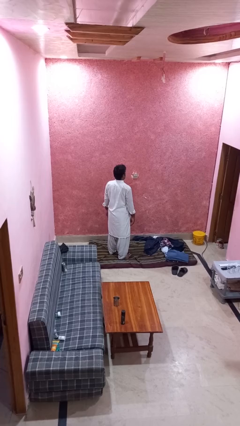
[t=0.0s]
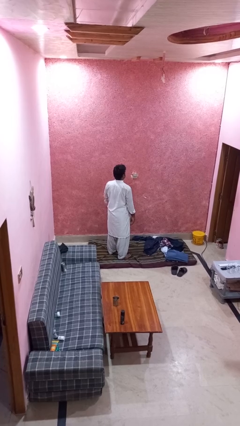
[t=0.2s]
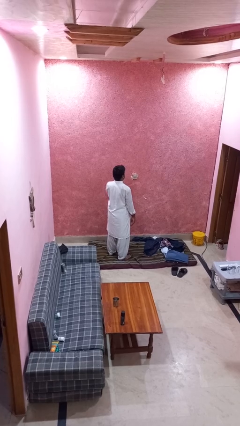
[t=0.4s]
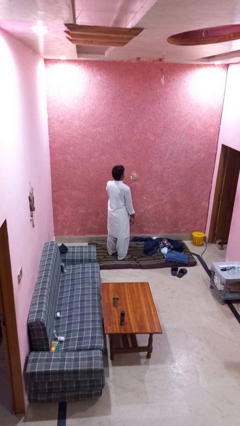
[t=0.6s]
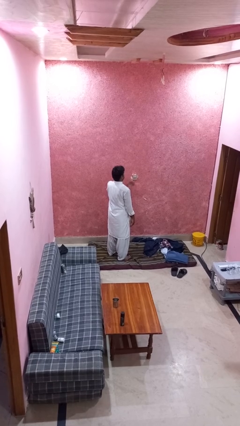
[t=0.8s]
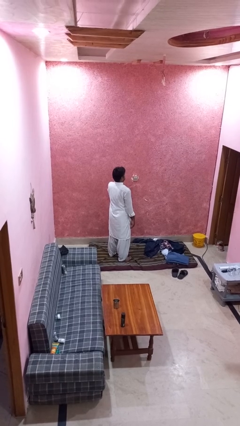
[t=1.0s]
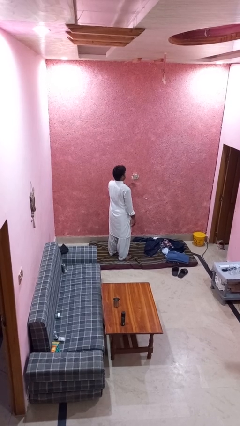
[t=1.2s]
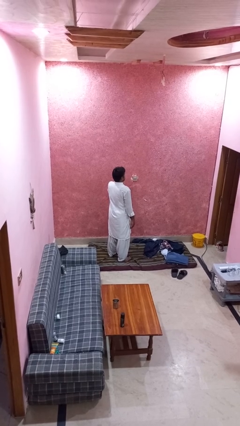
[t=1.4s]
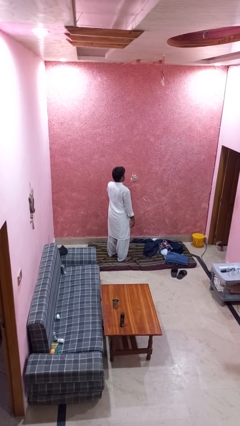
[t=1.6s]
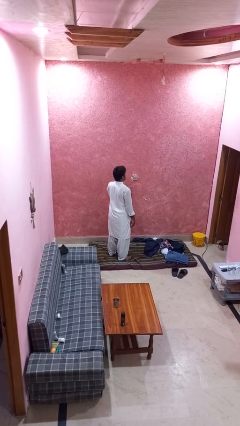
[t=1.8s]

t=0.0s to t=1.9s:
person drums on chest

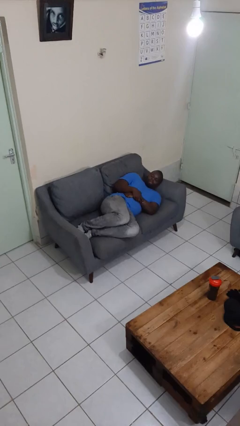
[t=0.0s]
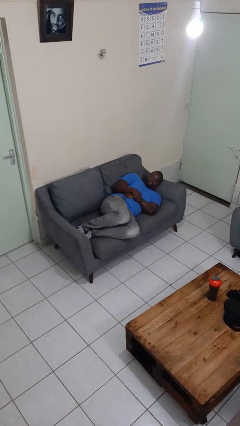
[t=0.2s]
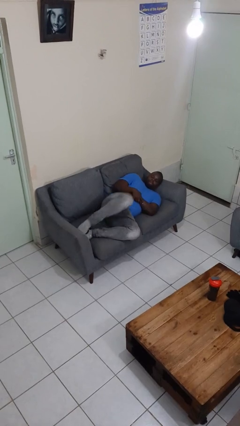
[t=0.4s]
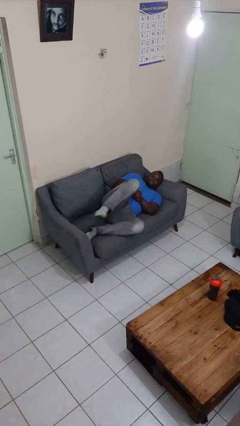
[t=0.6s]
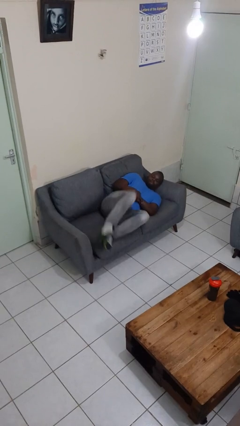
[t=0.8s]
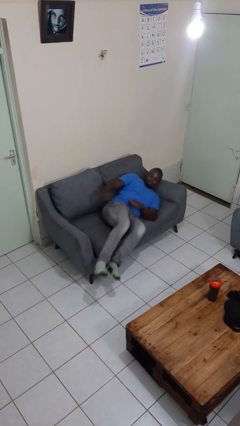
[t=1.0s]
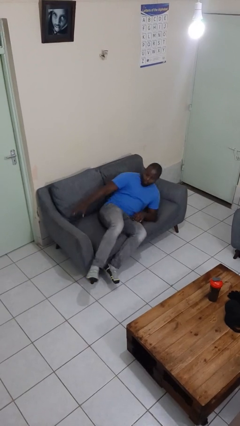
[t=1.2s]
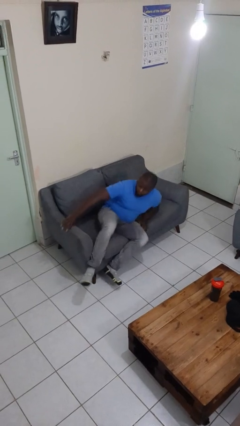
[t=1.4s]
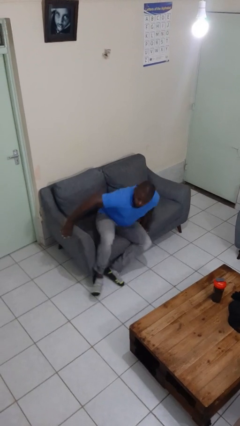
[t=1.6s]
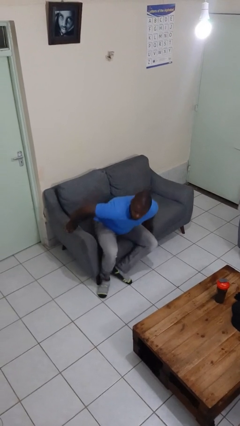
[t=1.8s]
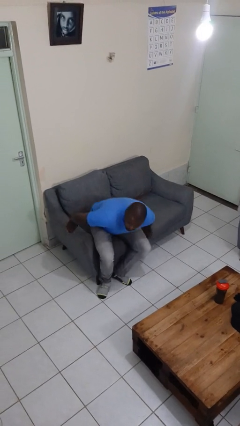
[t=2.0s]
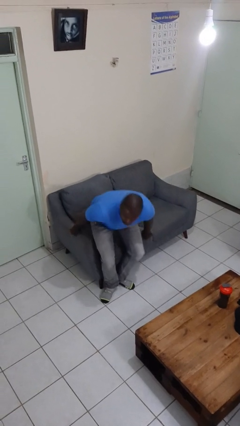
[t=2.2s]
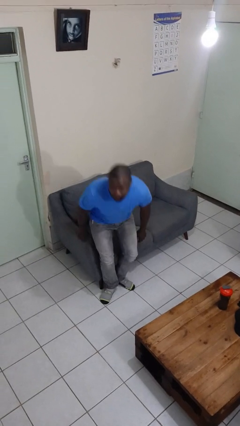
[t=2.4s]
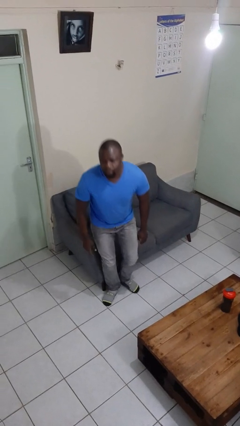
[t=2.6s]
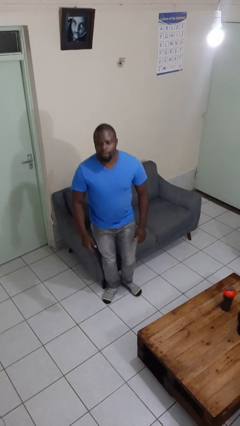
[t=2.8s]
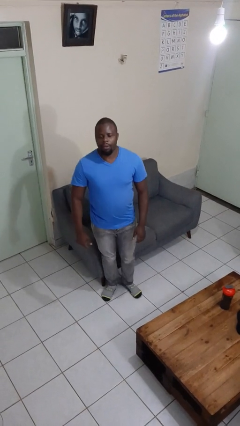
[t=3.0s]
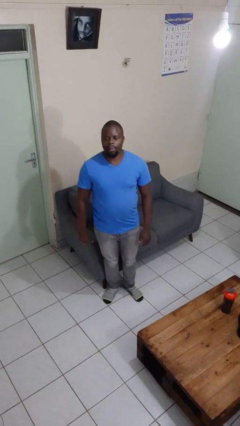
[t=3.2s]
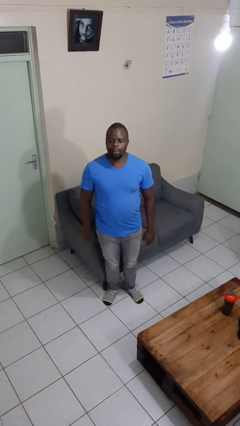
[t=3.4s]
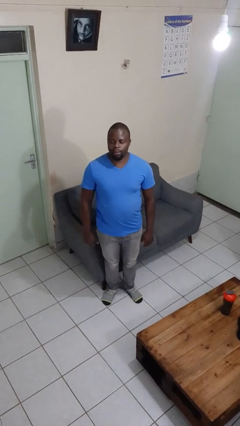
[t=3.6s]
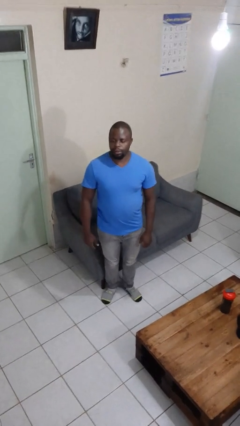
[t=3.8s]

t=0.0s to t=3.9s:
person stands up

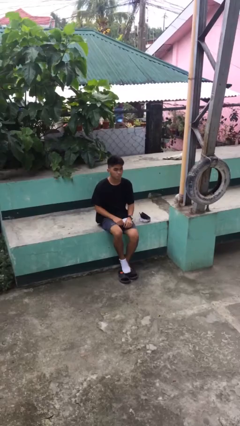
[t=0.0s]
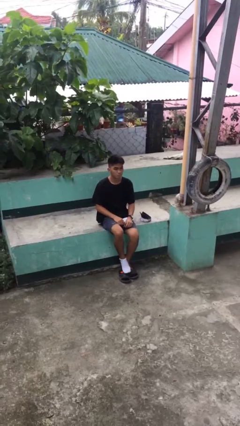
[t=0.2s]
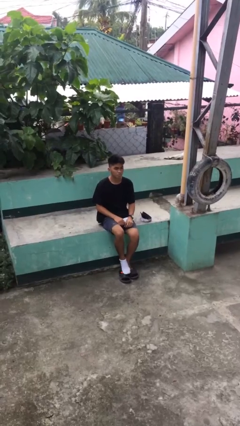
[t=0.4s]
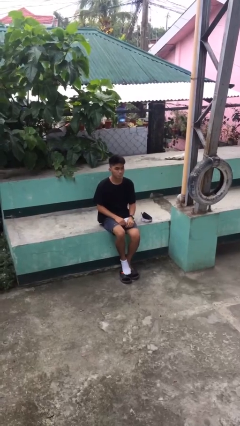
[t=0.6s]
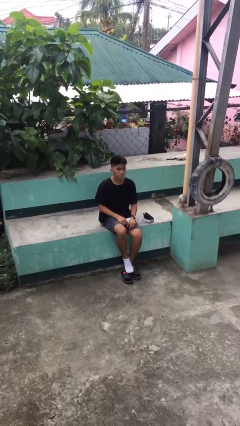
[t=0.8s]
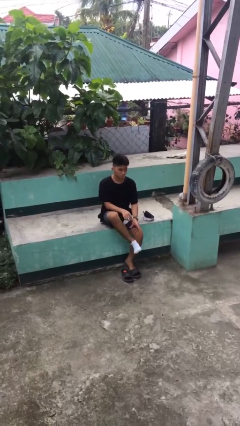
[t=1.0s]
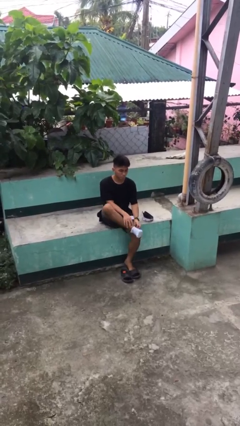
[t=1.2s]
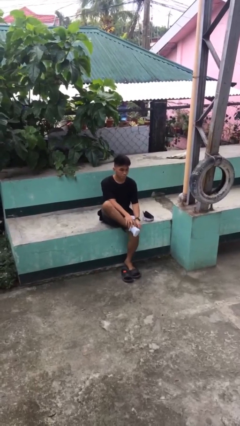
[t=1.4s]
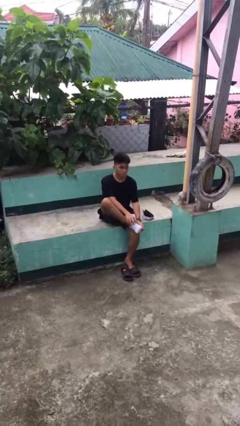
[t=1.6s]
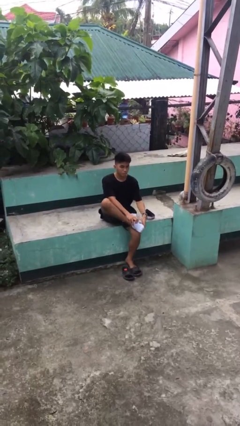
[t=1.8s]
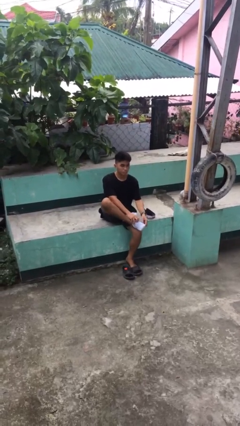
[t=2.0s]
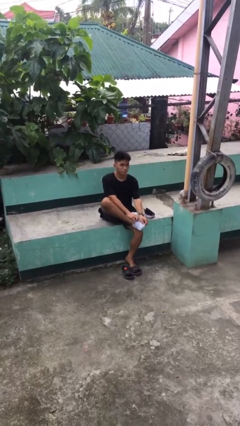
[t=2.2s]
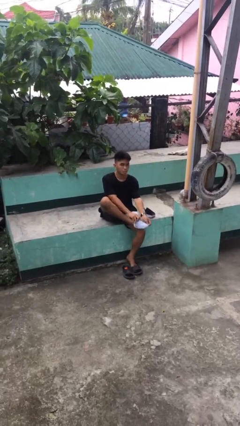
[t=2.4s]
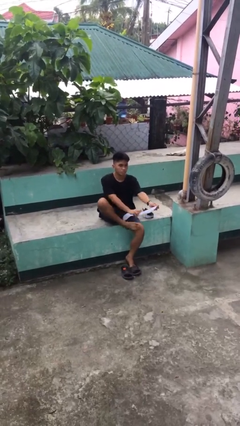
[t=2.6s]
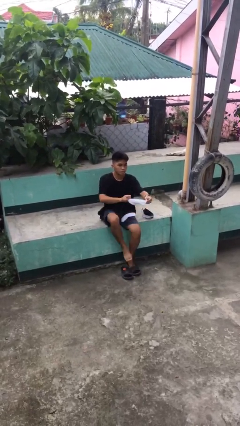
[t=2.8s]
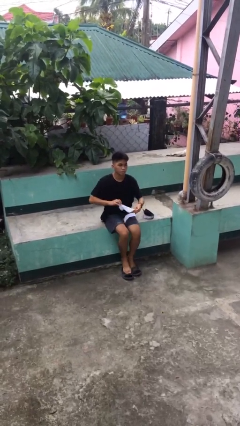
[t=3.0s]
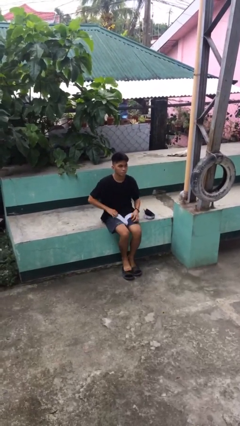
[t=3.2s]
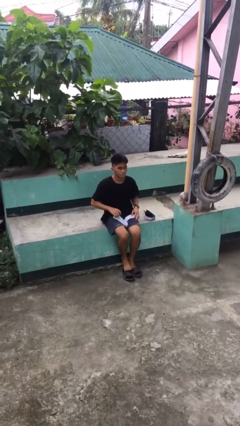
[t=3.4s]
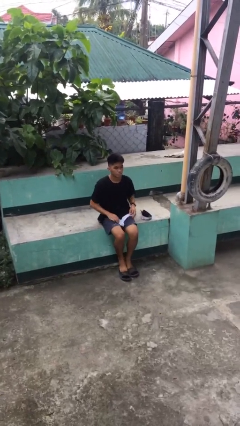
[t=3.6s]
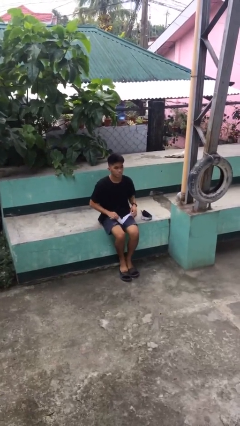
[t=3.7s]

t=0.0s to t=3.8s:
person takes off socks

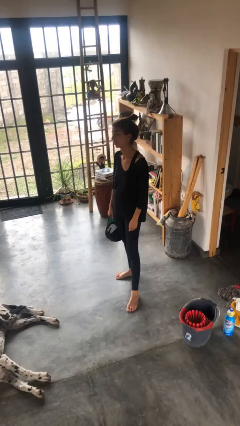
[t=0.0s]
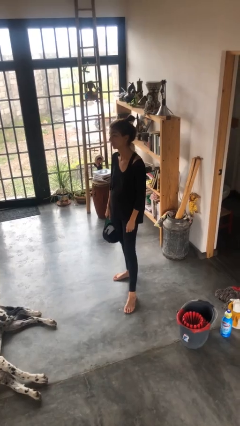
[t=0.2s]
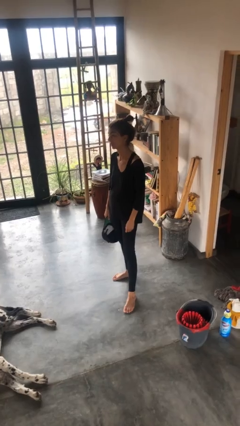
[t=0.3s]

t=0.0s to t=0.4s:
person takes off hat

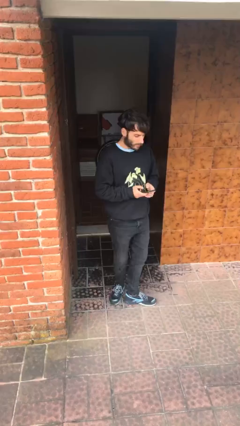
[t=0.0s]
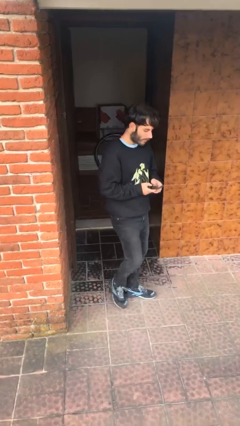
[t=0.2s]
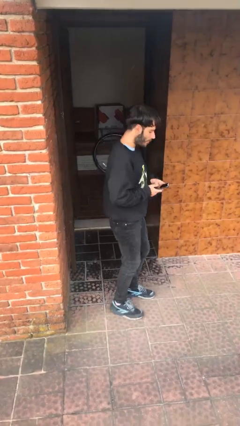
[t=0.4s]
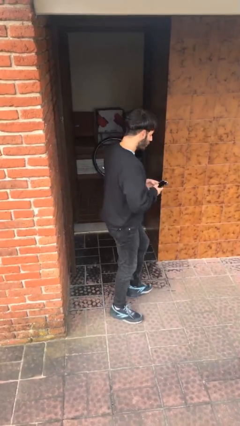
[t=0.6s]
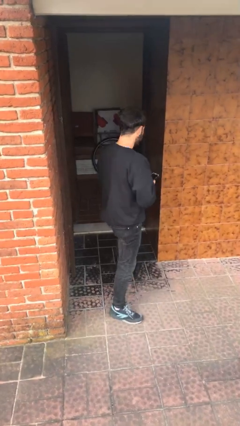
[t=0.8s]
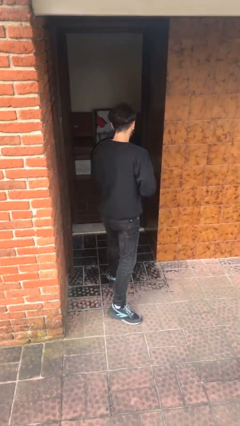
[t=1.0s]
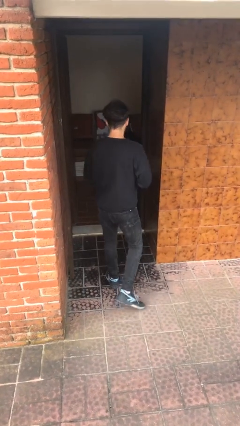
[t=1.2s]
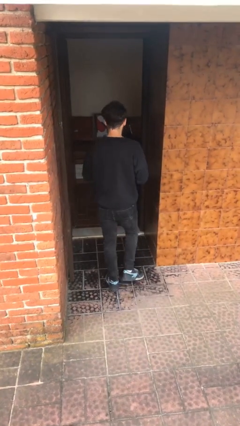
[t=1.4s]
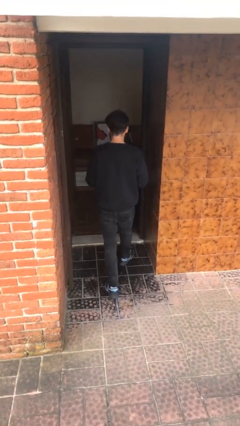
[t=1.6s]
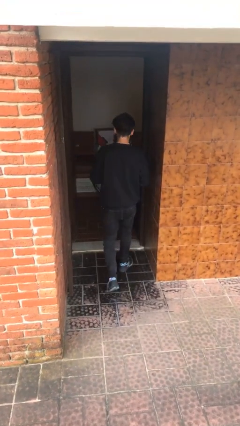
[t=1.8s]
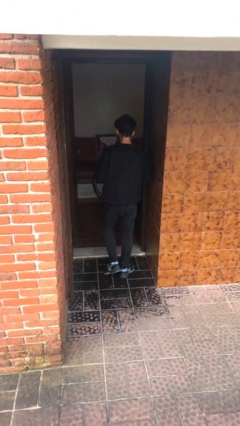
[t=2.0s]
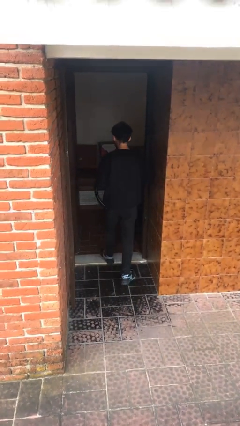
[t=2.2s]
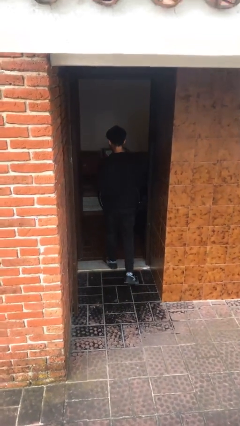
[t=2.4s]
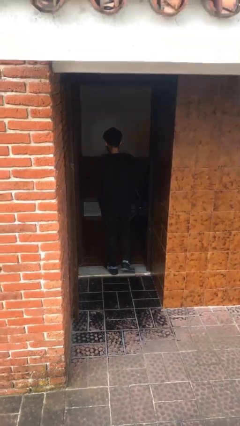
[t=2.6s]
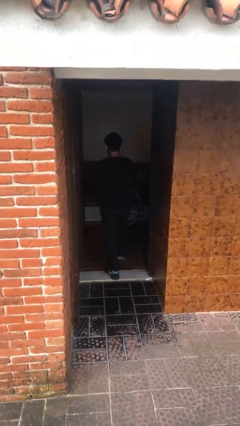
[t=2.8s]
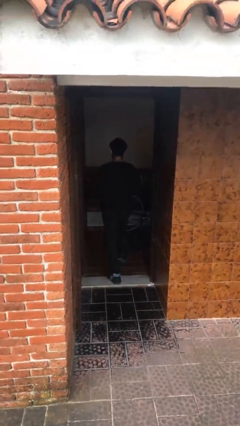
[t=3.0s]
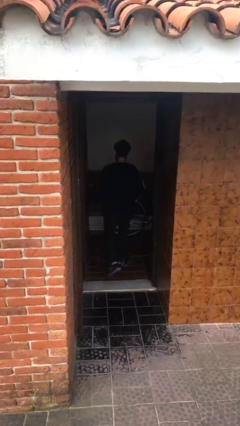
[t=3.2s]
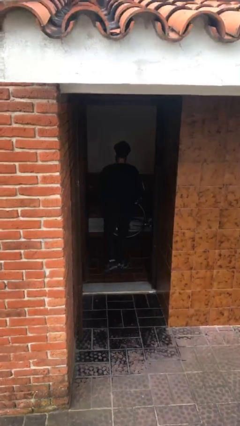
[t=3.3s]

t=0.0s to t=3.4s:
person exits scene through structure

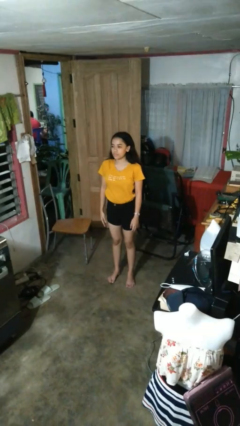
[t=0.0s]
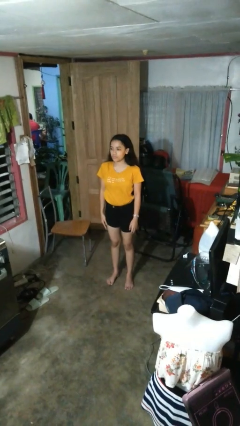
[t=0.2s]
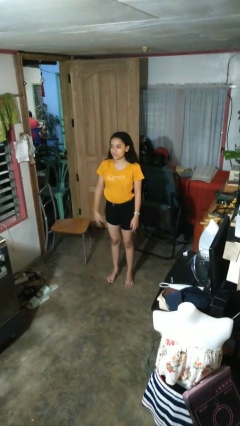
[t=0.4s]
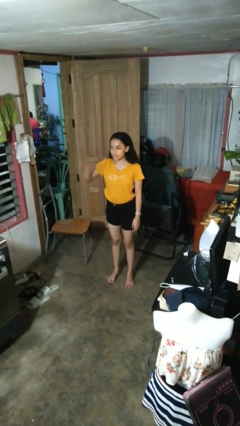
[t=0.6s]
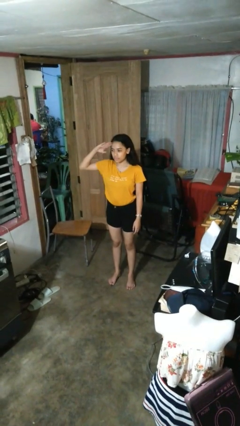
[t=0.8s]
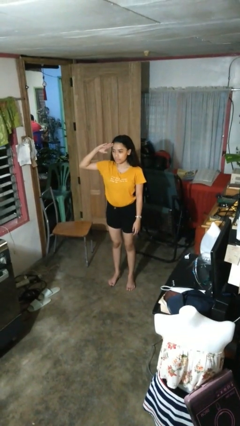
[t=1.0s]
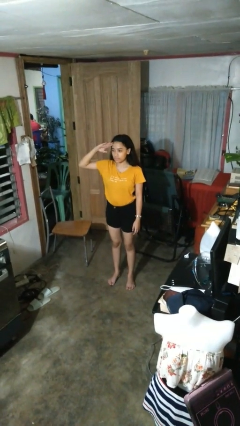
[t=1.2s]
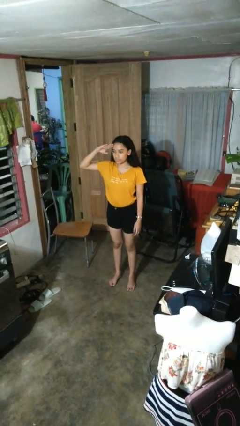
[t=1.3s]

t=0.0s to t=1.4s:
person salutes

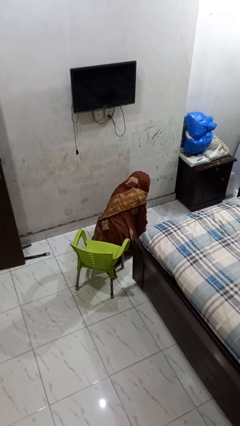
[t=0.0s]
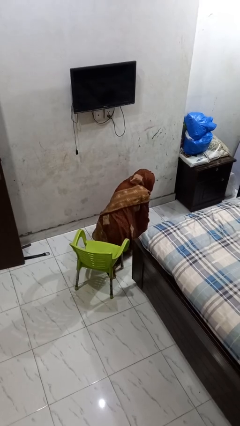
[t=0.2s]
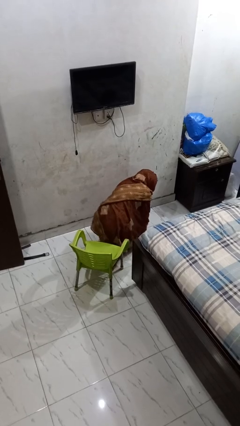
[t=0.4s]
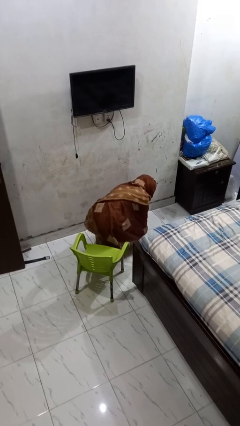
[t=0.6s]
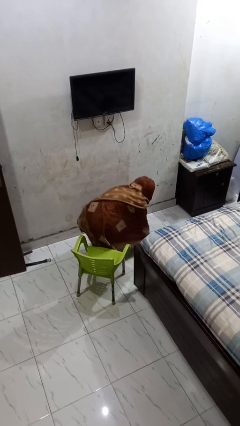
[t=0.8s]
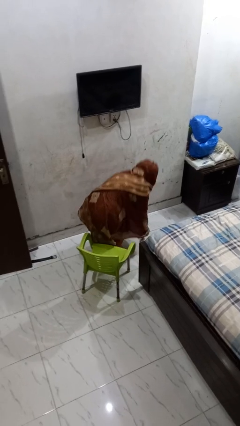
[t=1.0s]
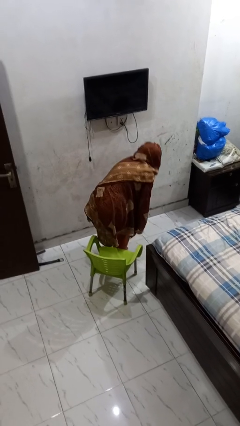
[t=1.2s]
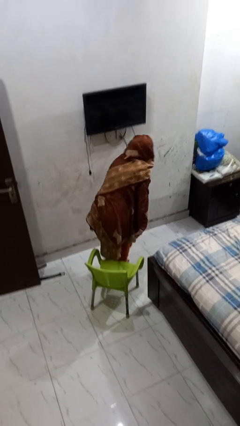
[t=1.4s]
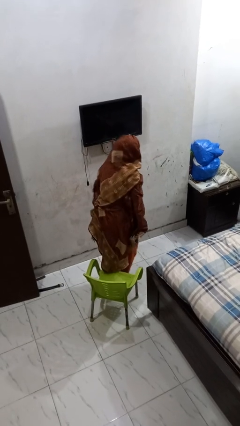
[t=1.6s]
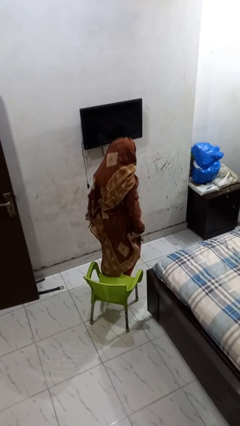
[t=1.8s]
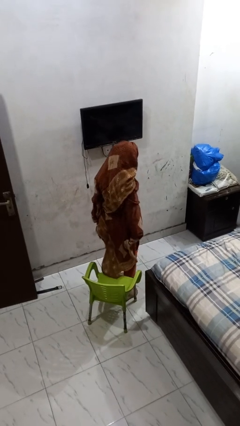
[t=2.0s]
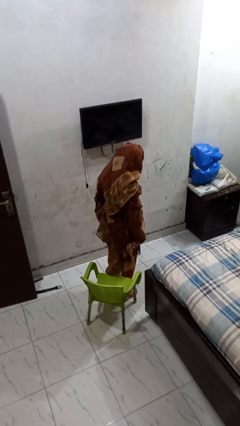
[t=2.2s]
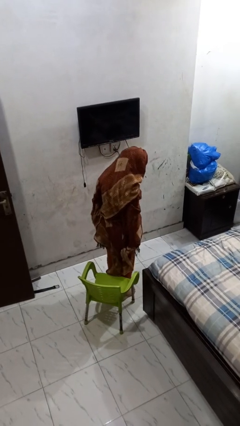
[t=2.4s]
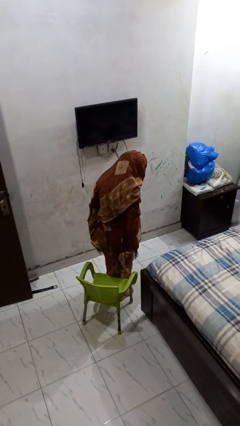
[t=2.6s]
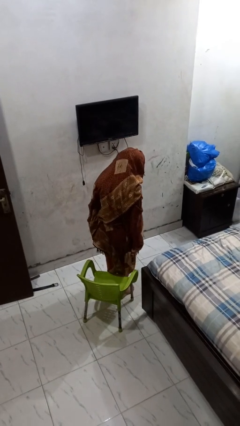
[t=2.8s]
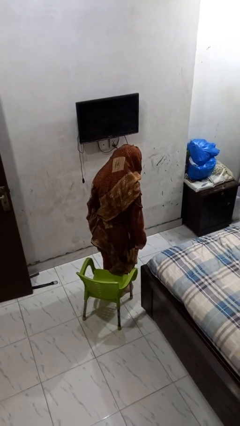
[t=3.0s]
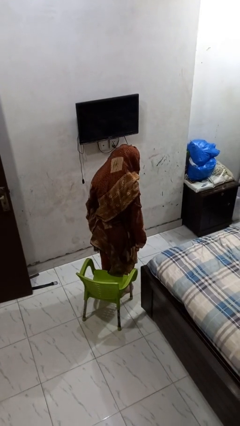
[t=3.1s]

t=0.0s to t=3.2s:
person stands up from floor
